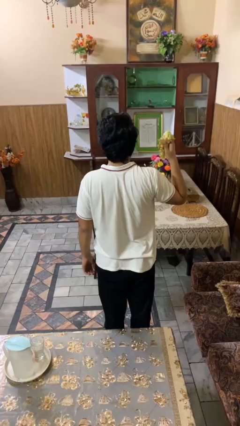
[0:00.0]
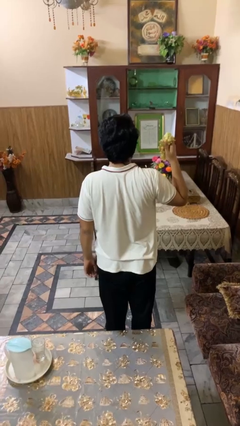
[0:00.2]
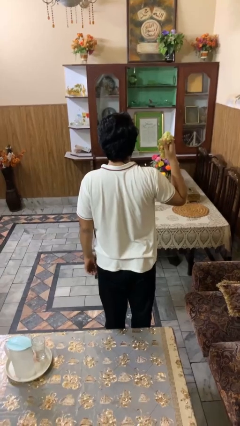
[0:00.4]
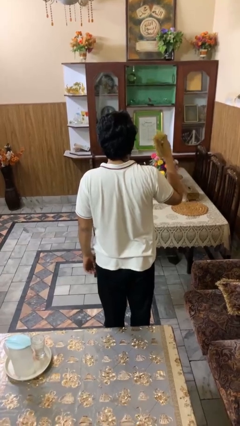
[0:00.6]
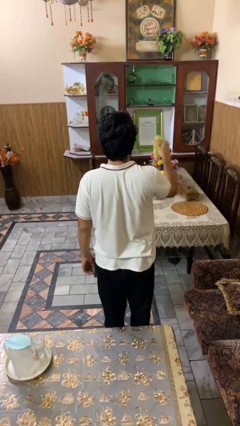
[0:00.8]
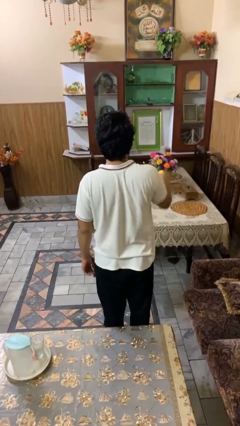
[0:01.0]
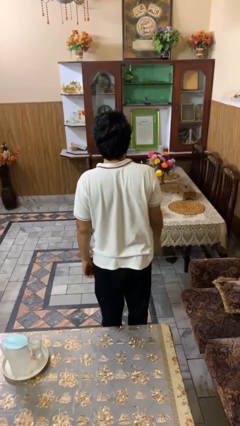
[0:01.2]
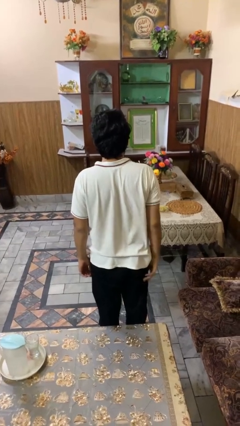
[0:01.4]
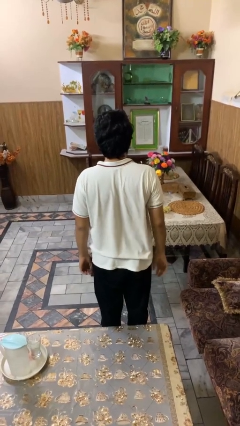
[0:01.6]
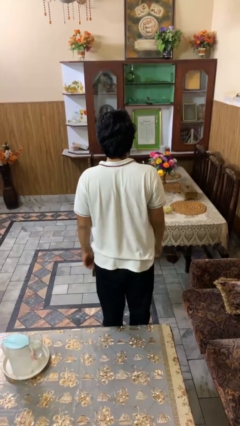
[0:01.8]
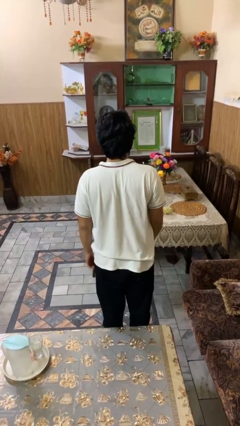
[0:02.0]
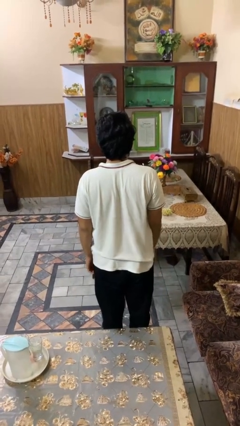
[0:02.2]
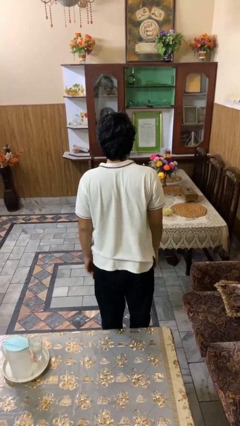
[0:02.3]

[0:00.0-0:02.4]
person throws object on table

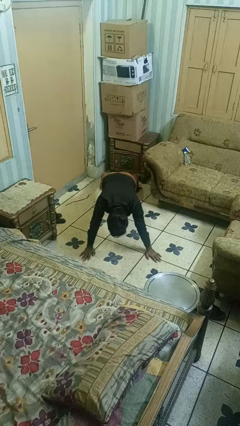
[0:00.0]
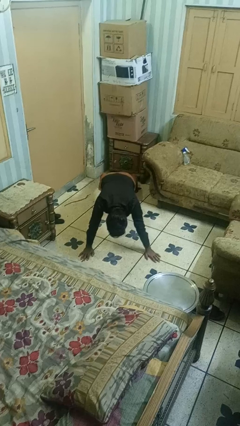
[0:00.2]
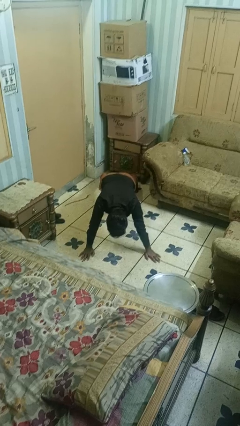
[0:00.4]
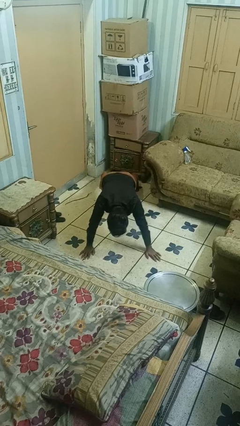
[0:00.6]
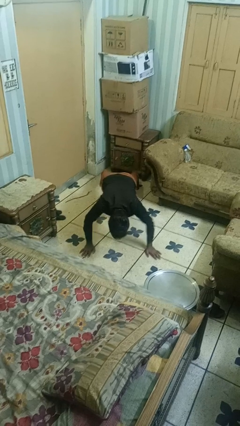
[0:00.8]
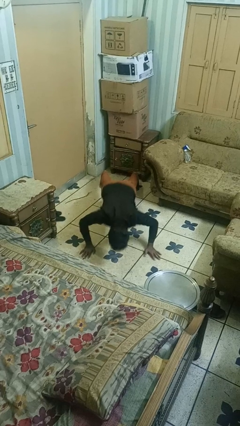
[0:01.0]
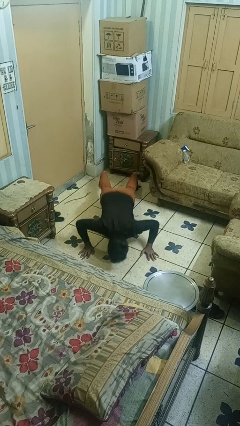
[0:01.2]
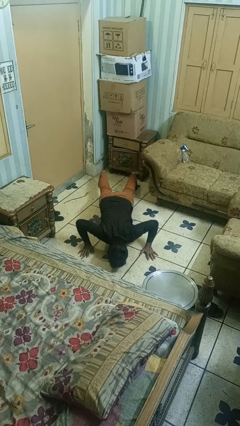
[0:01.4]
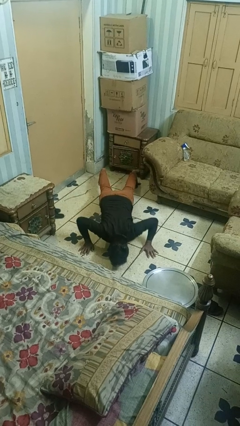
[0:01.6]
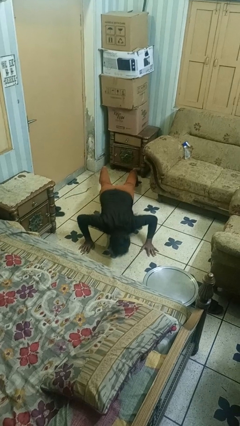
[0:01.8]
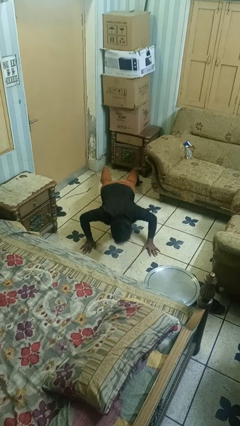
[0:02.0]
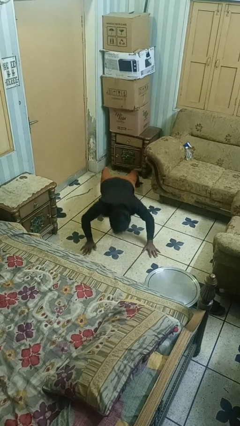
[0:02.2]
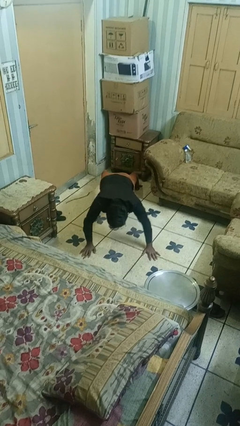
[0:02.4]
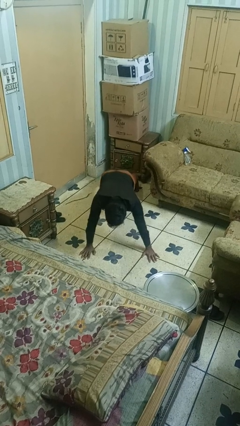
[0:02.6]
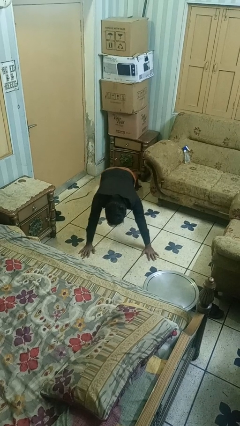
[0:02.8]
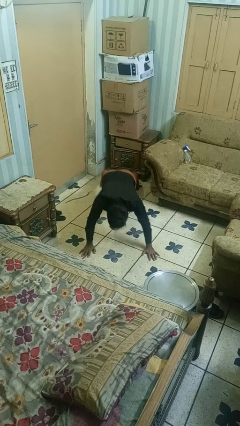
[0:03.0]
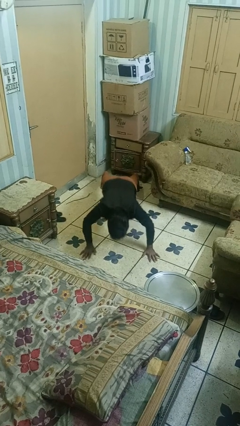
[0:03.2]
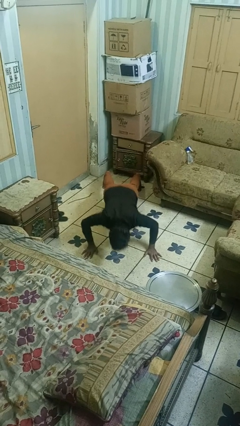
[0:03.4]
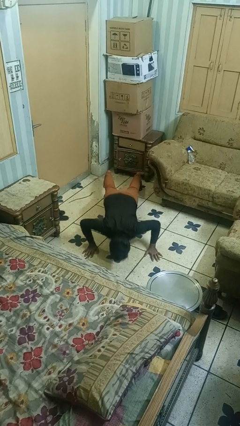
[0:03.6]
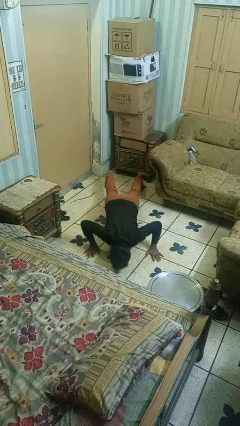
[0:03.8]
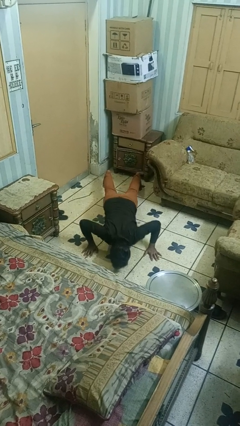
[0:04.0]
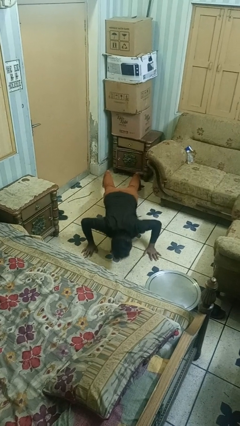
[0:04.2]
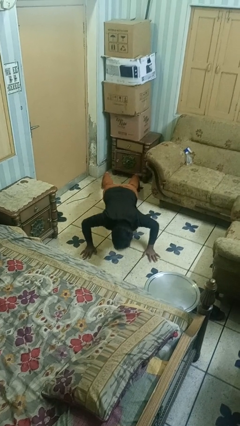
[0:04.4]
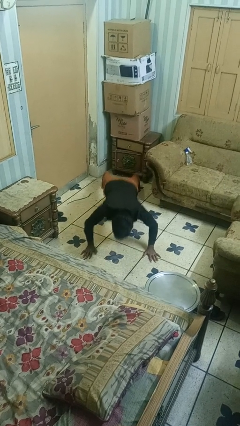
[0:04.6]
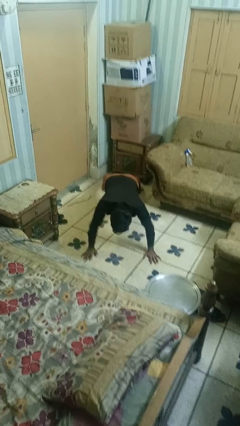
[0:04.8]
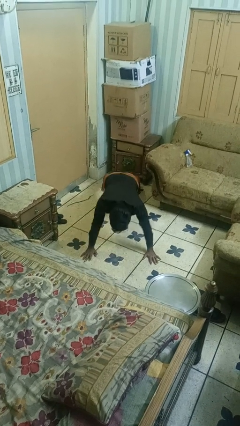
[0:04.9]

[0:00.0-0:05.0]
person exercises with pushup

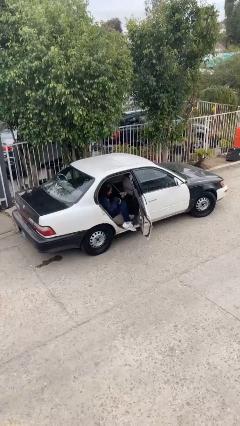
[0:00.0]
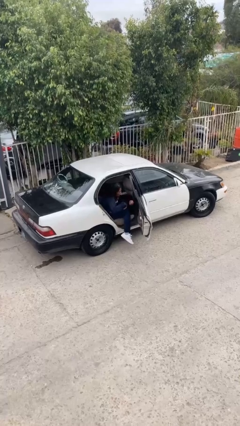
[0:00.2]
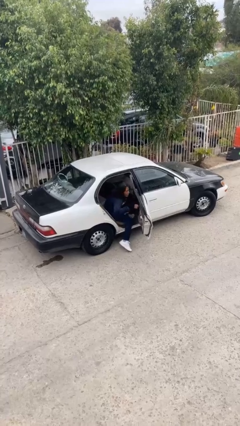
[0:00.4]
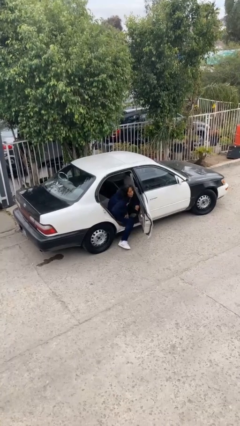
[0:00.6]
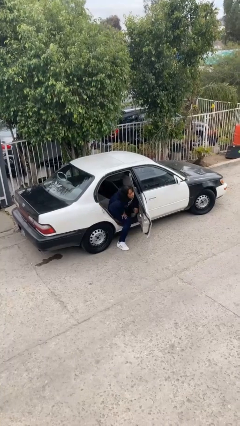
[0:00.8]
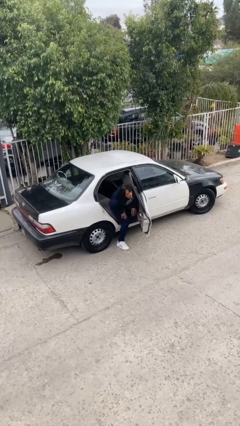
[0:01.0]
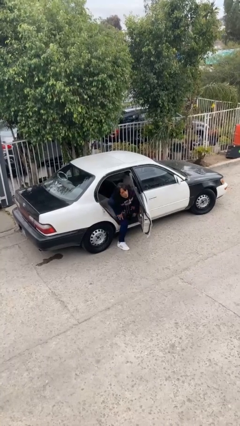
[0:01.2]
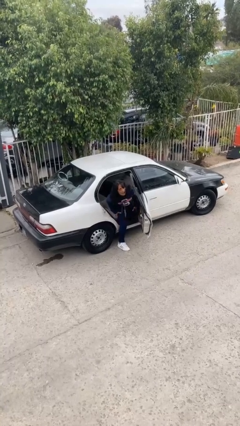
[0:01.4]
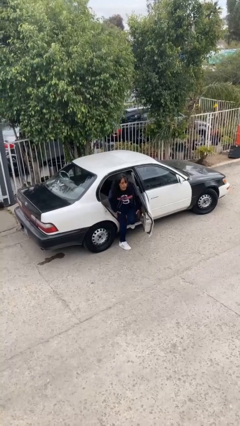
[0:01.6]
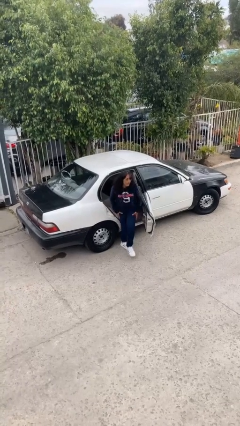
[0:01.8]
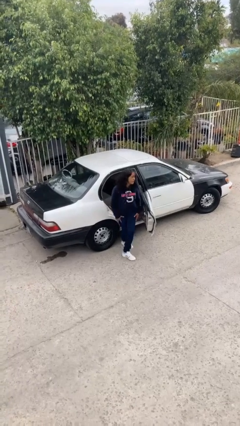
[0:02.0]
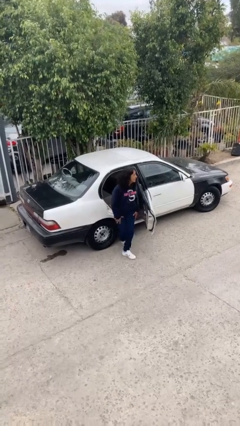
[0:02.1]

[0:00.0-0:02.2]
person exits car

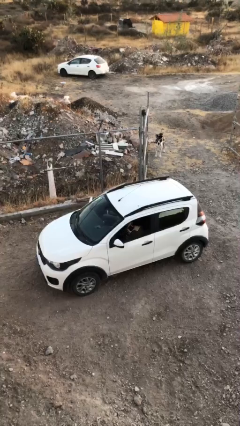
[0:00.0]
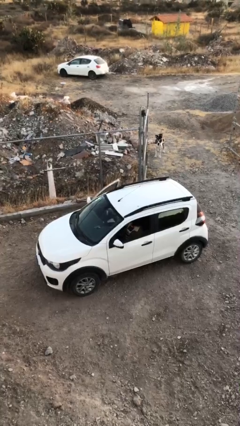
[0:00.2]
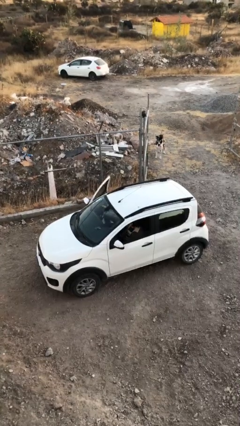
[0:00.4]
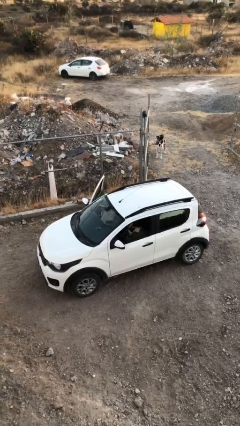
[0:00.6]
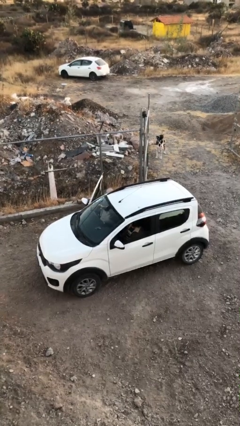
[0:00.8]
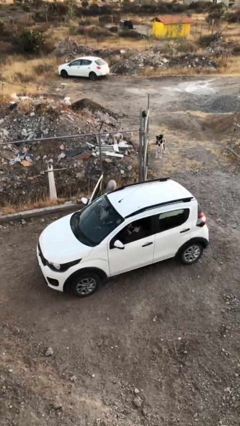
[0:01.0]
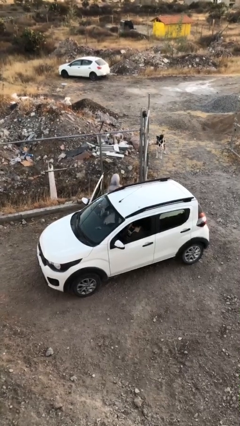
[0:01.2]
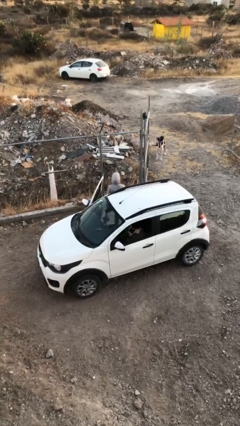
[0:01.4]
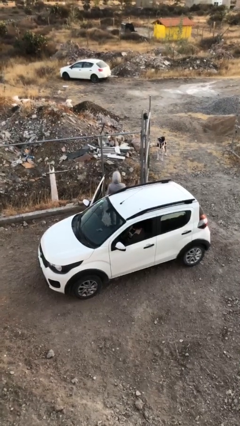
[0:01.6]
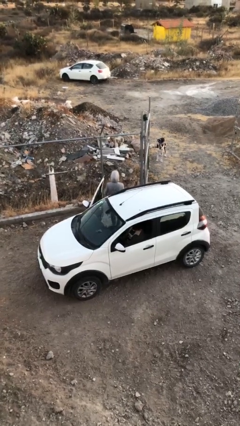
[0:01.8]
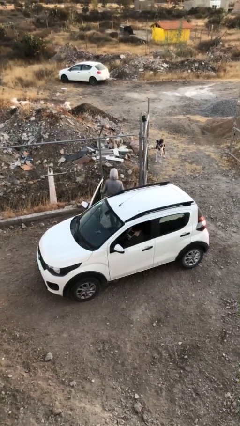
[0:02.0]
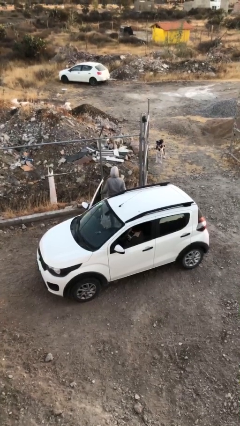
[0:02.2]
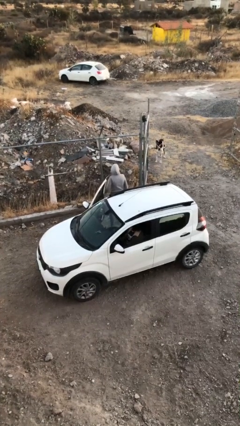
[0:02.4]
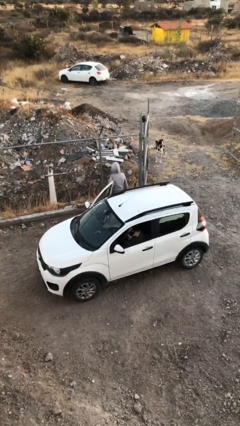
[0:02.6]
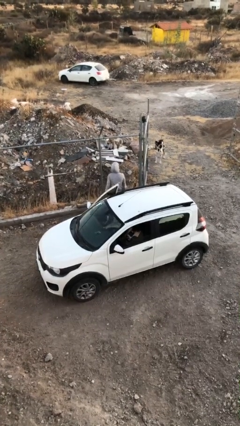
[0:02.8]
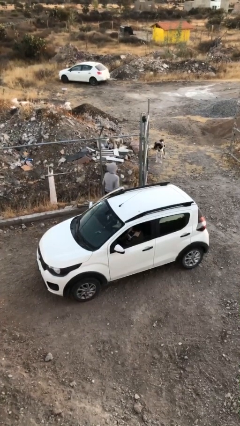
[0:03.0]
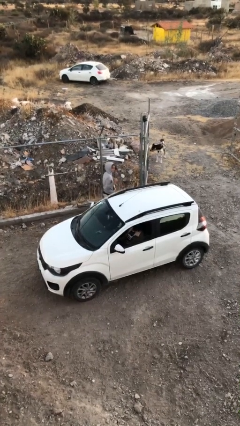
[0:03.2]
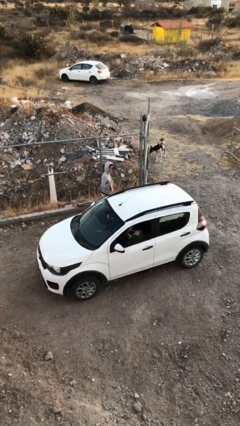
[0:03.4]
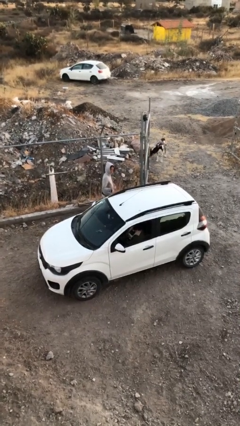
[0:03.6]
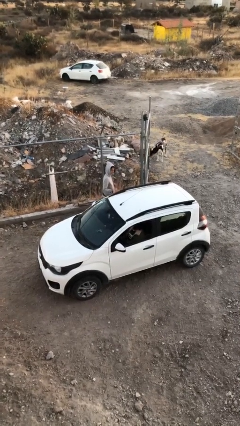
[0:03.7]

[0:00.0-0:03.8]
car drops off person

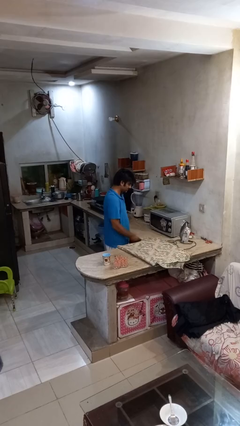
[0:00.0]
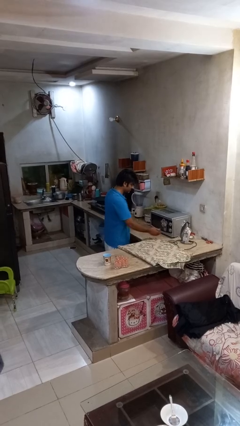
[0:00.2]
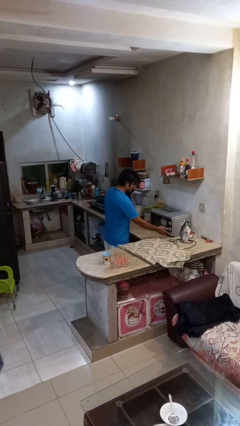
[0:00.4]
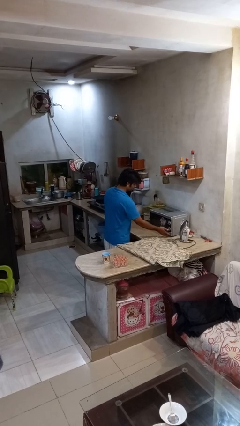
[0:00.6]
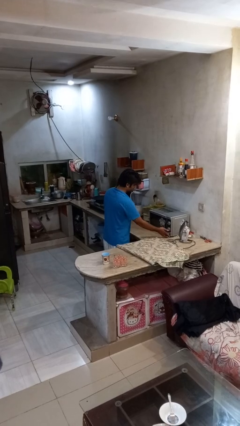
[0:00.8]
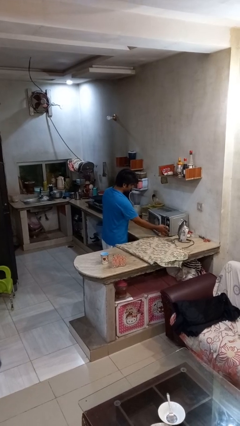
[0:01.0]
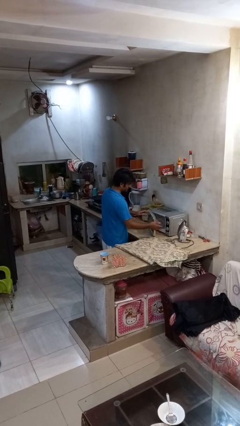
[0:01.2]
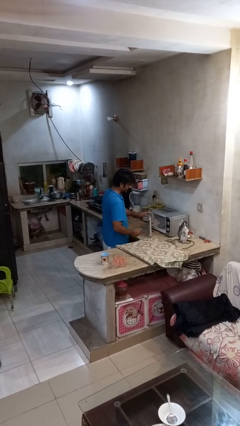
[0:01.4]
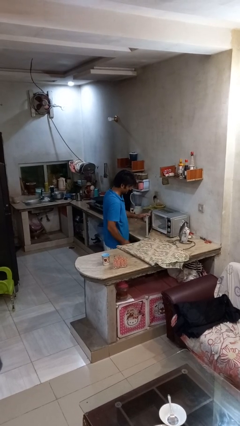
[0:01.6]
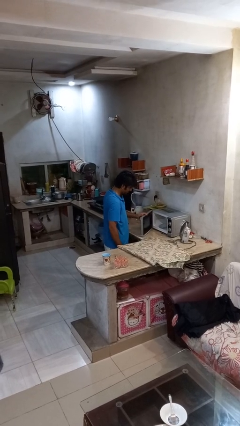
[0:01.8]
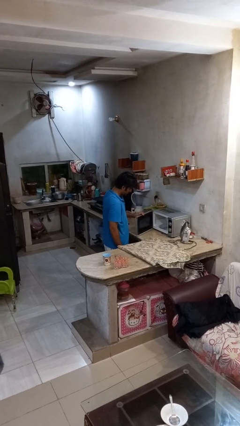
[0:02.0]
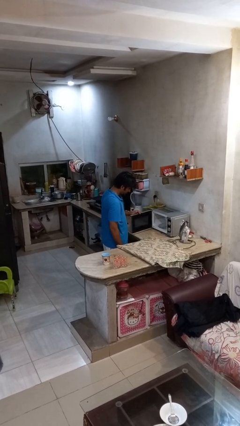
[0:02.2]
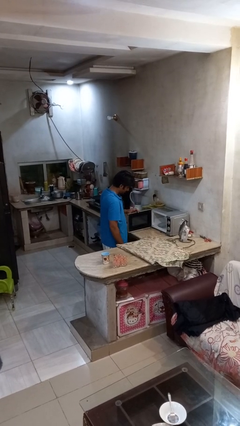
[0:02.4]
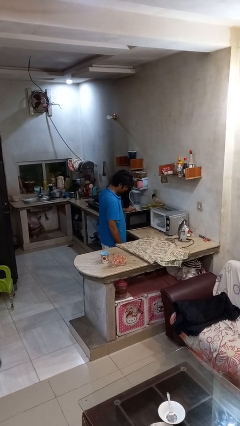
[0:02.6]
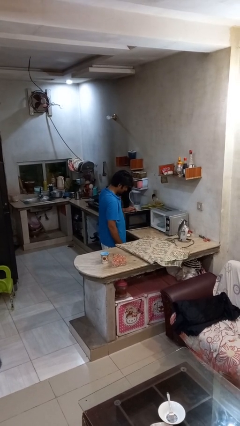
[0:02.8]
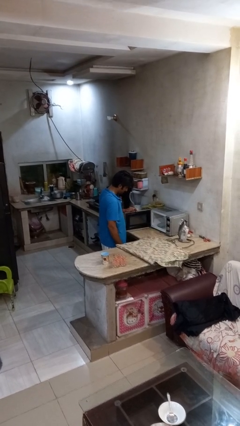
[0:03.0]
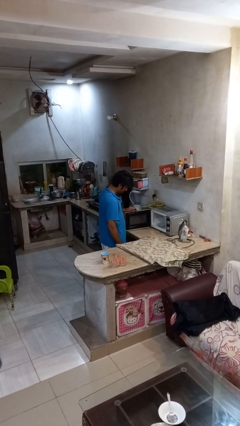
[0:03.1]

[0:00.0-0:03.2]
person opens microwave

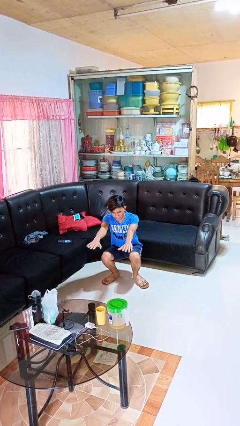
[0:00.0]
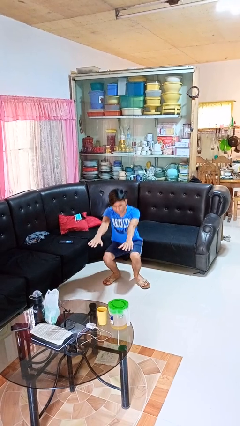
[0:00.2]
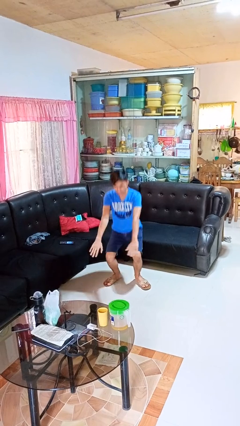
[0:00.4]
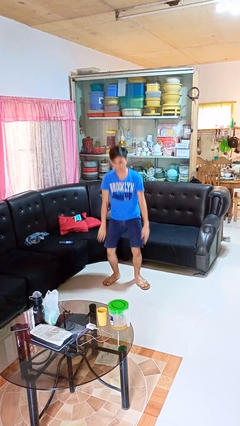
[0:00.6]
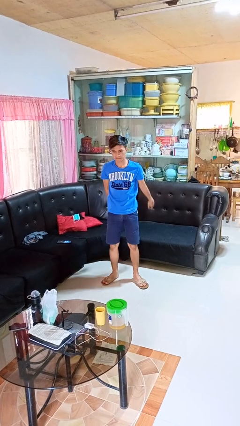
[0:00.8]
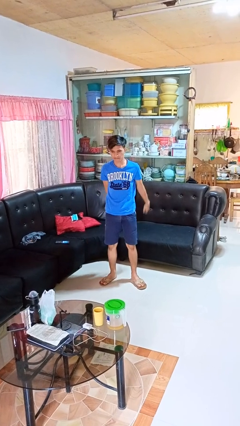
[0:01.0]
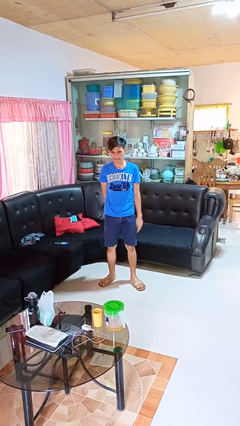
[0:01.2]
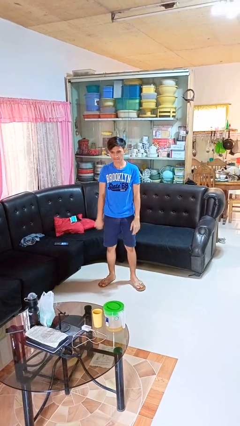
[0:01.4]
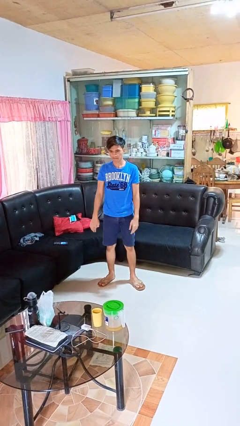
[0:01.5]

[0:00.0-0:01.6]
person stands up
